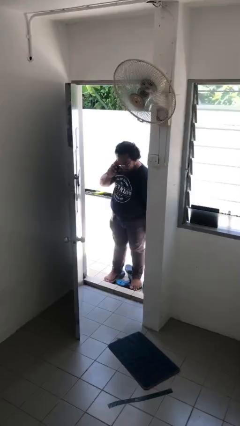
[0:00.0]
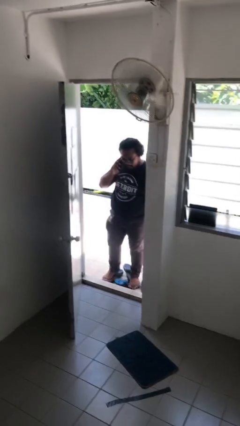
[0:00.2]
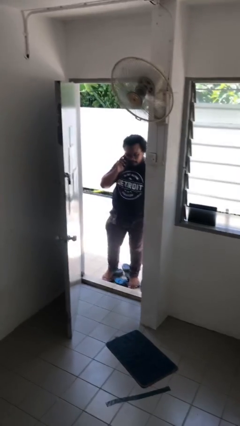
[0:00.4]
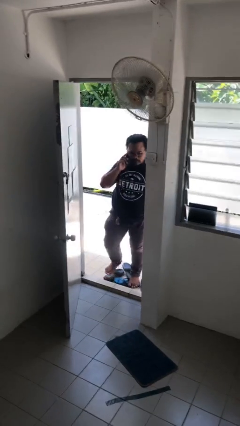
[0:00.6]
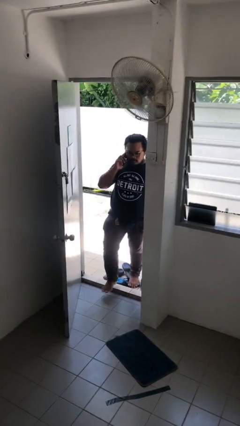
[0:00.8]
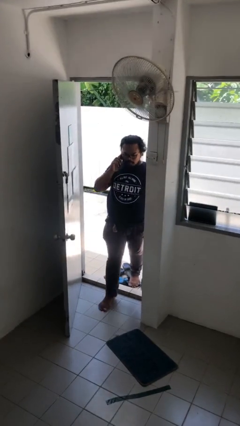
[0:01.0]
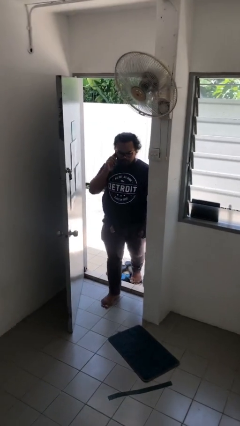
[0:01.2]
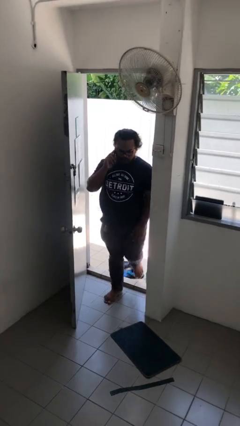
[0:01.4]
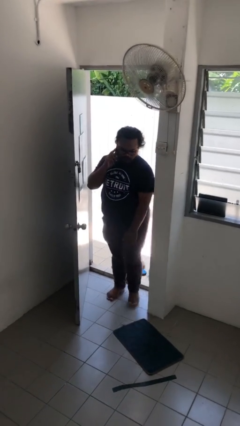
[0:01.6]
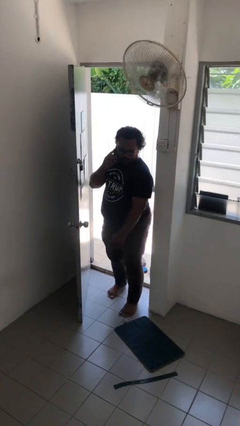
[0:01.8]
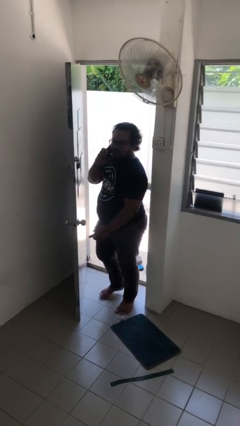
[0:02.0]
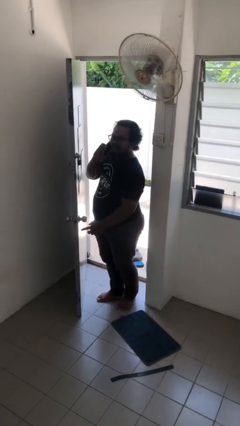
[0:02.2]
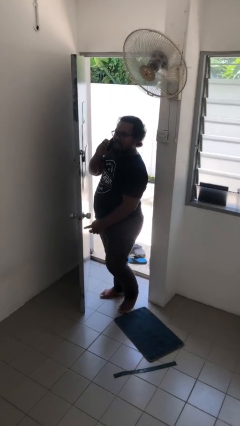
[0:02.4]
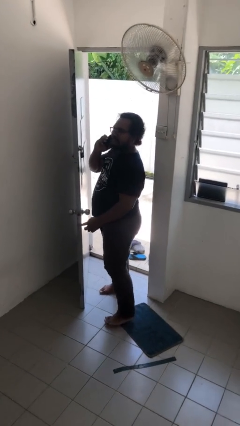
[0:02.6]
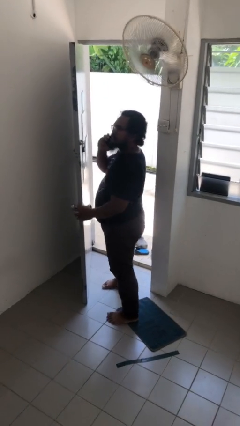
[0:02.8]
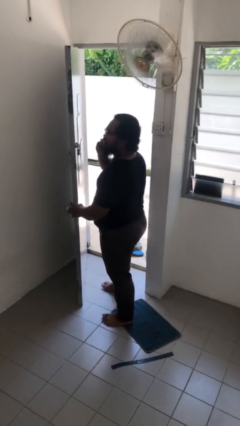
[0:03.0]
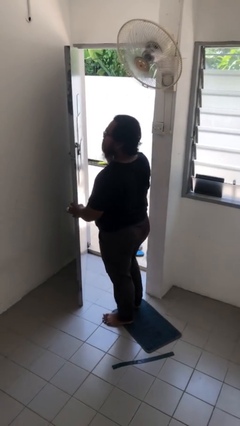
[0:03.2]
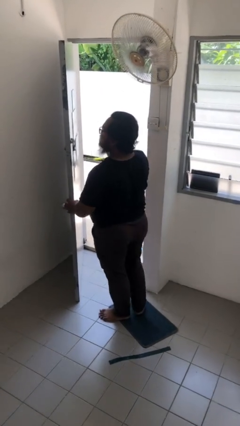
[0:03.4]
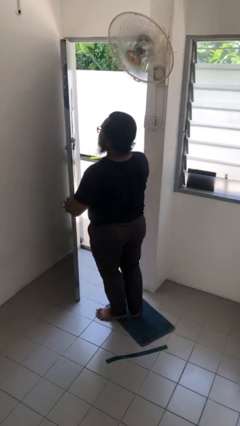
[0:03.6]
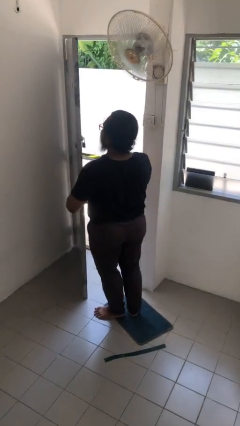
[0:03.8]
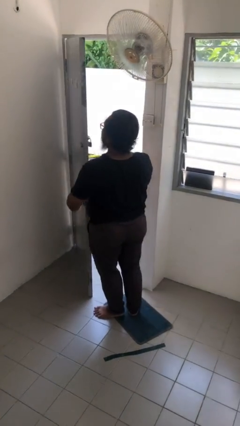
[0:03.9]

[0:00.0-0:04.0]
person enters scene through structure

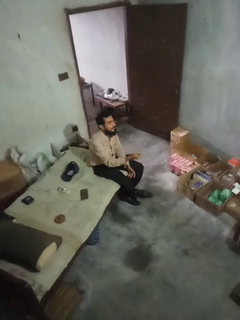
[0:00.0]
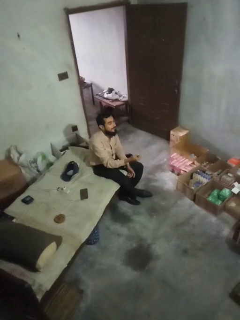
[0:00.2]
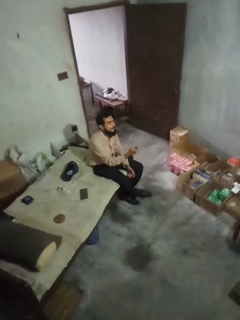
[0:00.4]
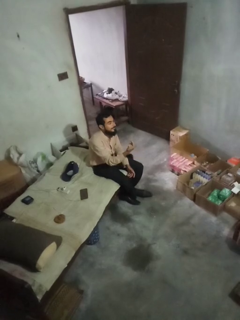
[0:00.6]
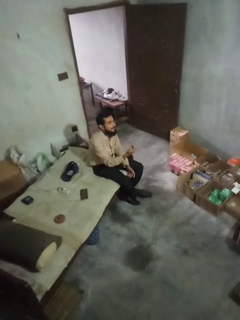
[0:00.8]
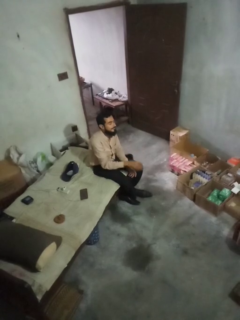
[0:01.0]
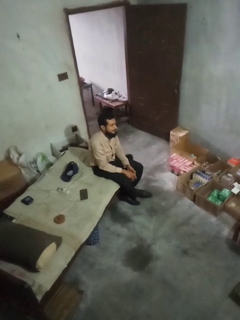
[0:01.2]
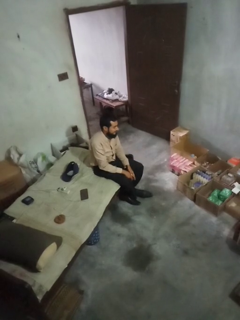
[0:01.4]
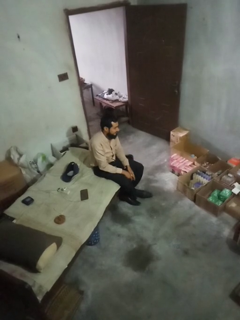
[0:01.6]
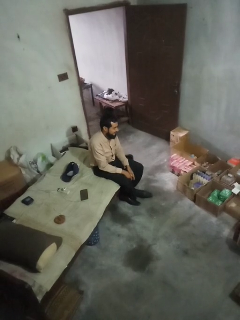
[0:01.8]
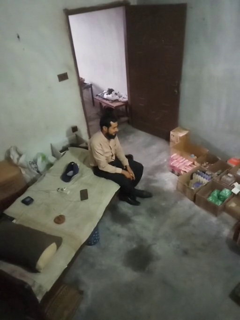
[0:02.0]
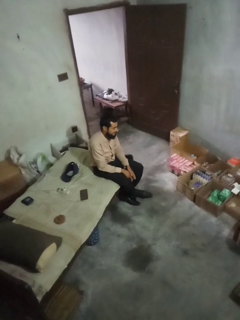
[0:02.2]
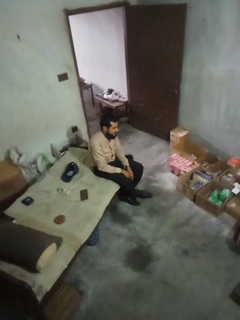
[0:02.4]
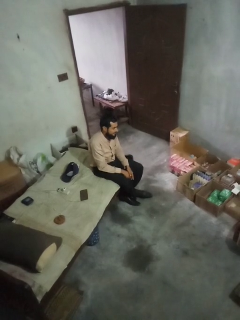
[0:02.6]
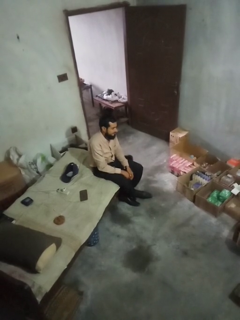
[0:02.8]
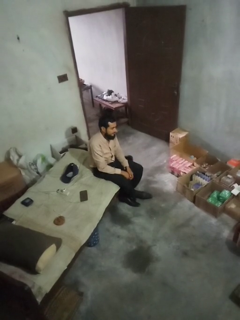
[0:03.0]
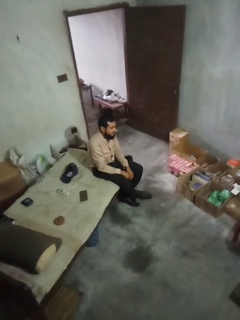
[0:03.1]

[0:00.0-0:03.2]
person gestures lower hand

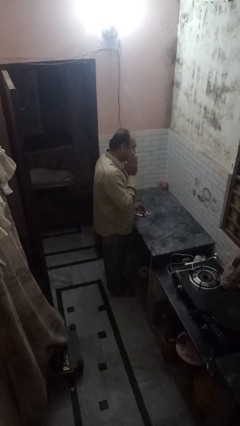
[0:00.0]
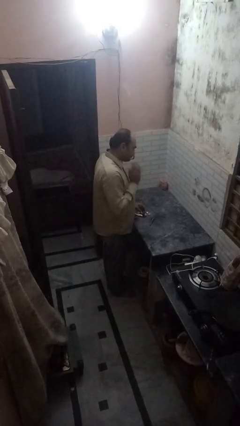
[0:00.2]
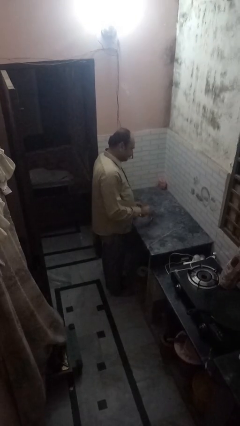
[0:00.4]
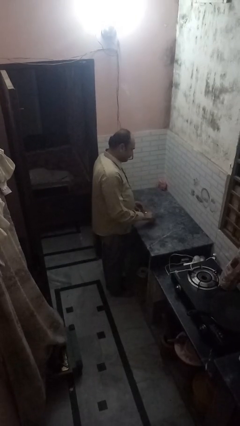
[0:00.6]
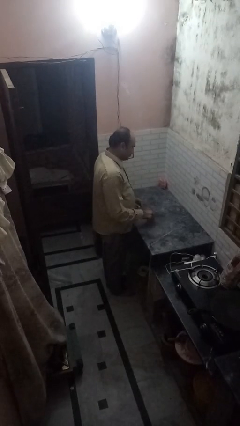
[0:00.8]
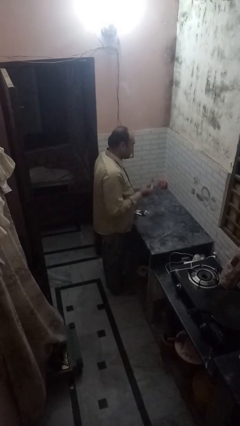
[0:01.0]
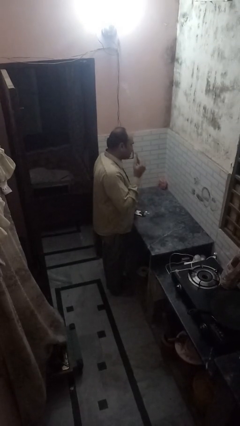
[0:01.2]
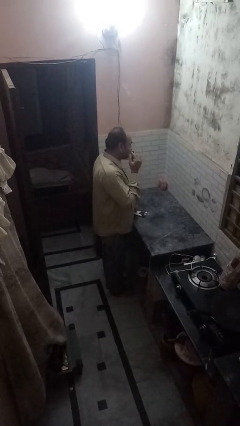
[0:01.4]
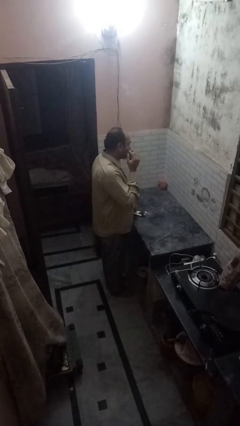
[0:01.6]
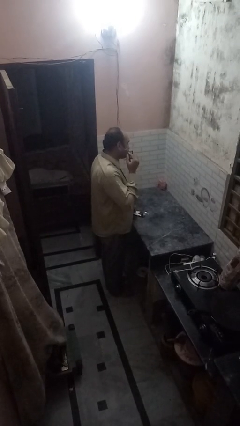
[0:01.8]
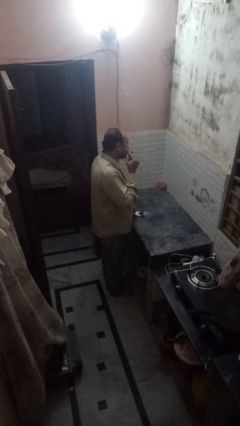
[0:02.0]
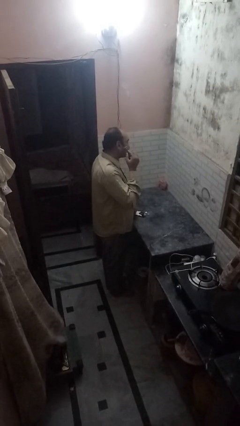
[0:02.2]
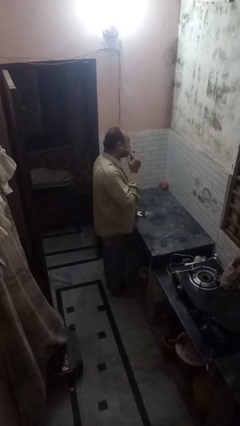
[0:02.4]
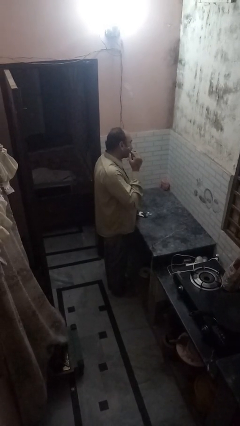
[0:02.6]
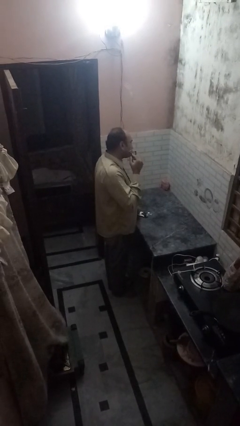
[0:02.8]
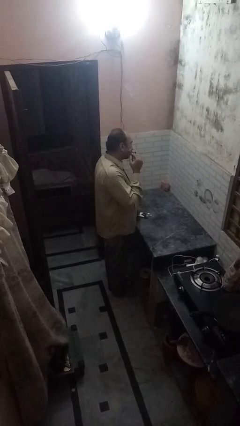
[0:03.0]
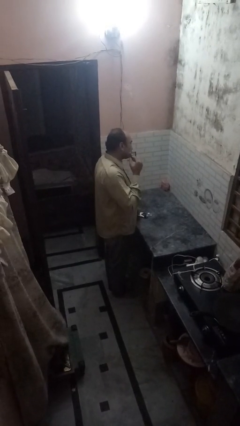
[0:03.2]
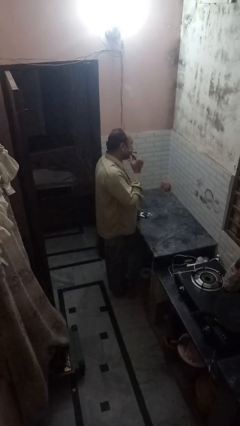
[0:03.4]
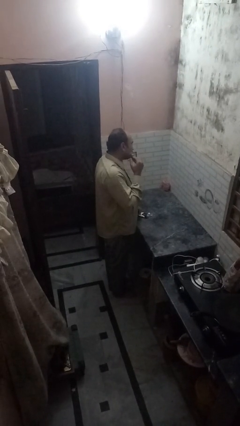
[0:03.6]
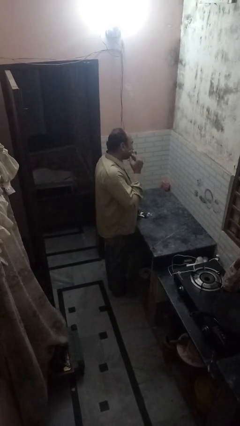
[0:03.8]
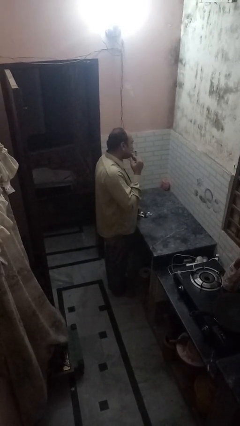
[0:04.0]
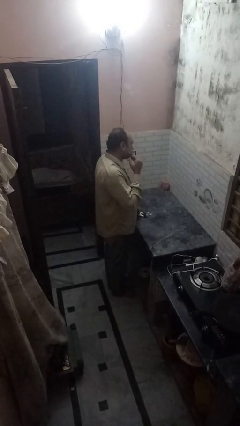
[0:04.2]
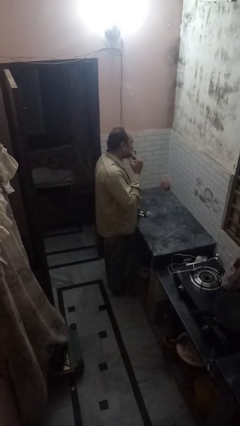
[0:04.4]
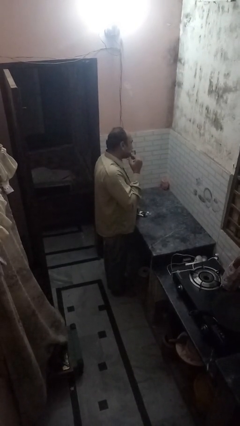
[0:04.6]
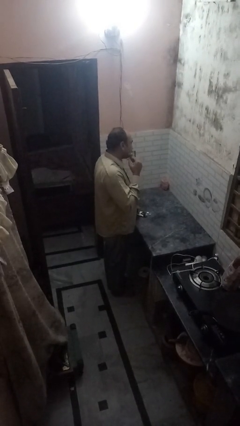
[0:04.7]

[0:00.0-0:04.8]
person shaves face

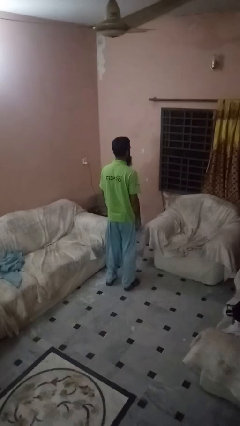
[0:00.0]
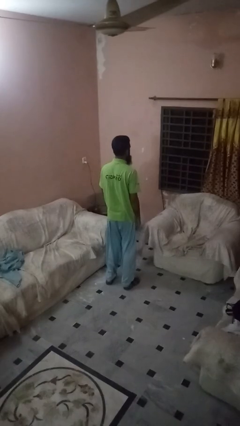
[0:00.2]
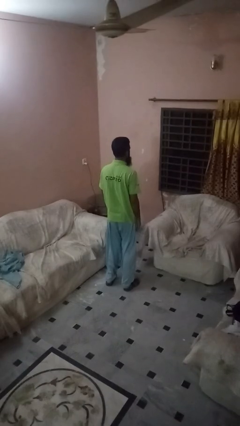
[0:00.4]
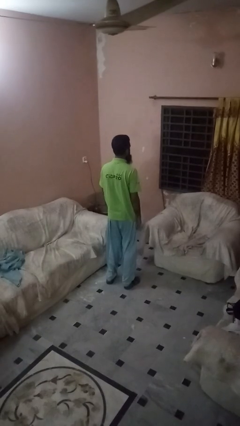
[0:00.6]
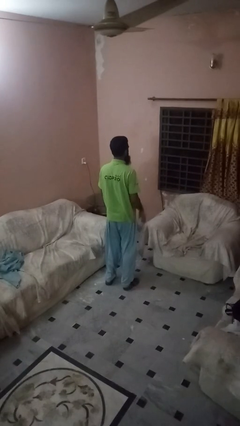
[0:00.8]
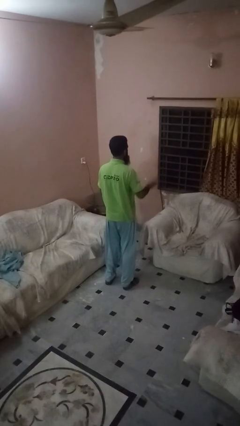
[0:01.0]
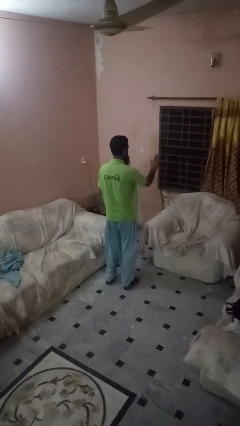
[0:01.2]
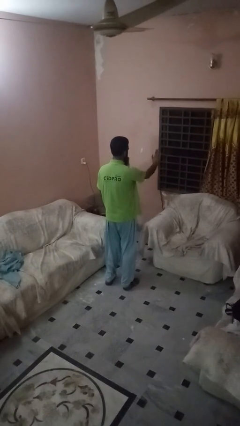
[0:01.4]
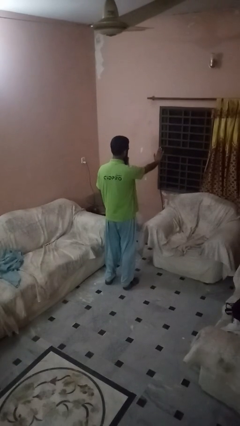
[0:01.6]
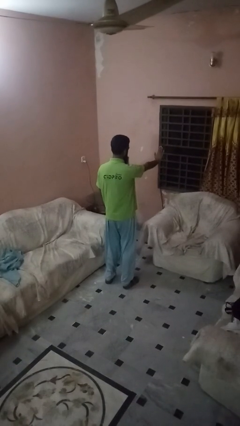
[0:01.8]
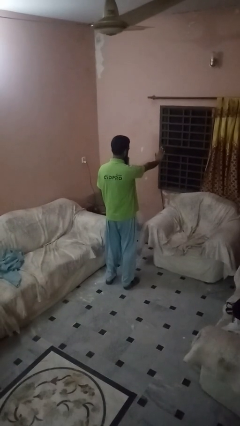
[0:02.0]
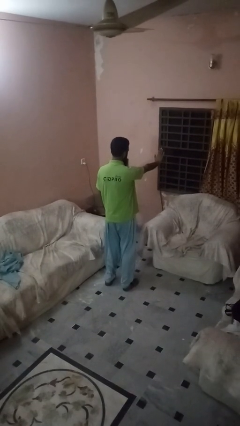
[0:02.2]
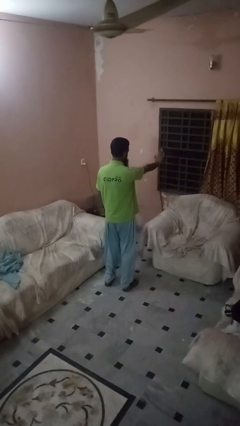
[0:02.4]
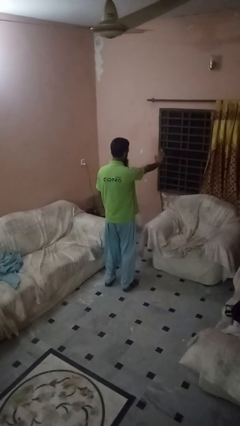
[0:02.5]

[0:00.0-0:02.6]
person gestures stop

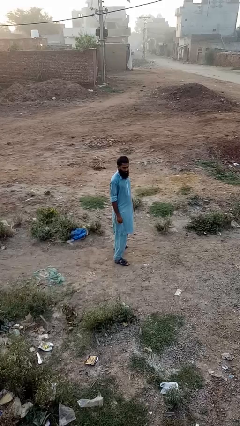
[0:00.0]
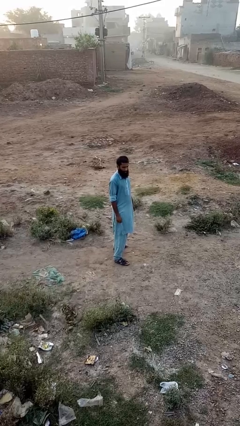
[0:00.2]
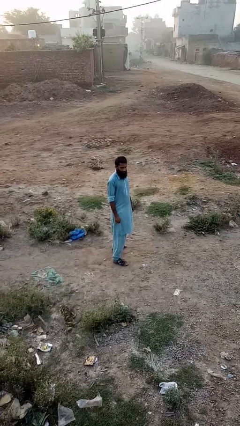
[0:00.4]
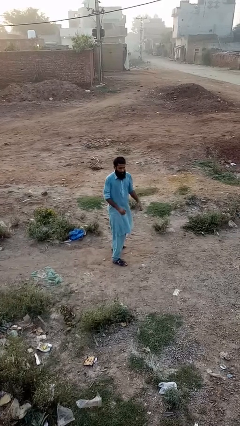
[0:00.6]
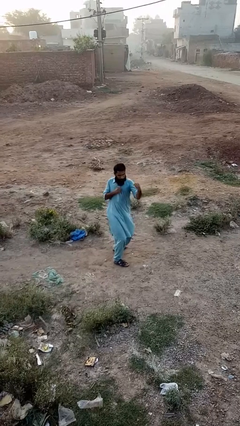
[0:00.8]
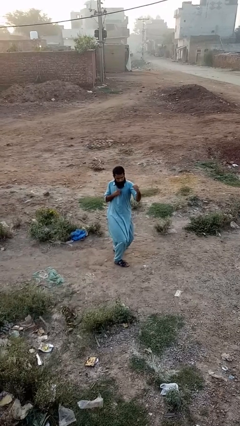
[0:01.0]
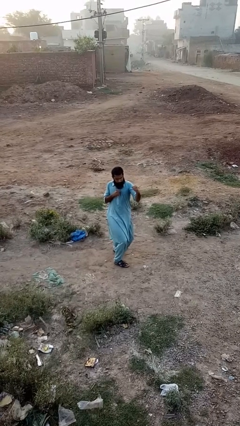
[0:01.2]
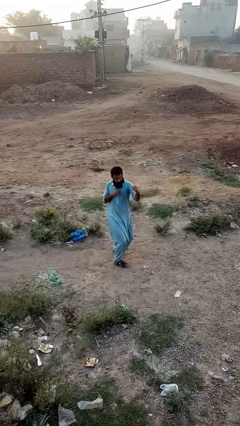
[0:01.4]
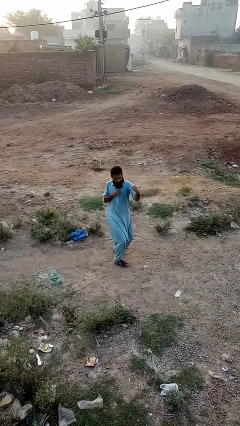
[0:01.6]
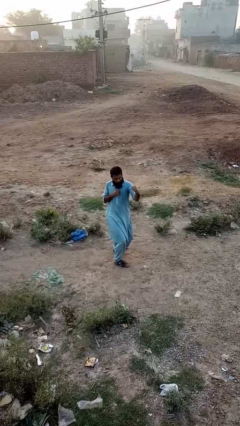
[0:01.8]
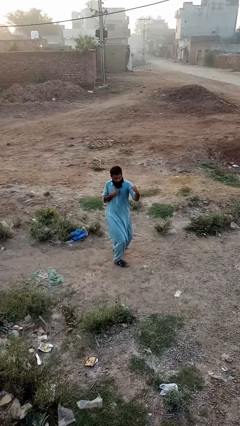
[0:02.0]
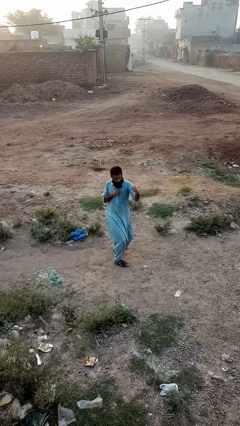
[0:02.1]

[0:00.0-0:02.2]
person karate chop

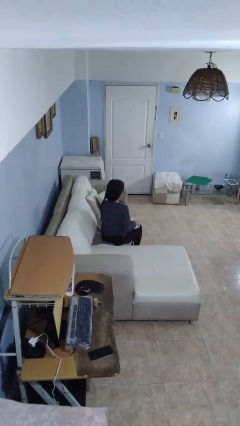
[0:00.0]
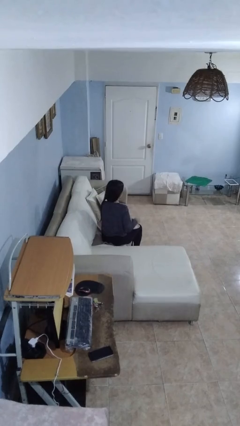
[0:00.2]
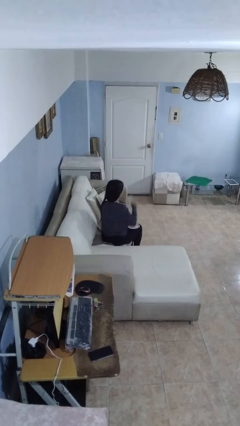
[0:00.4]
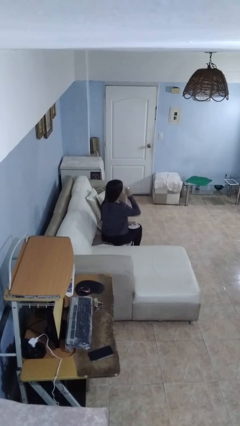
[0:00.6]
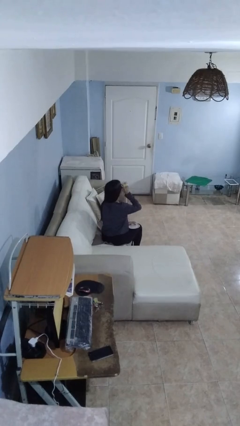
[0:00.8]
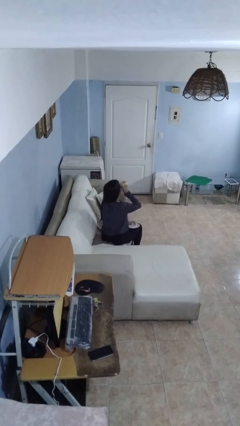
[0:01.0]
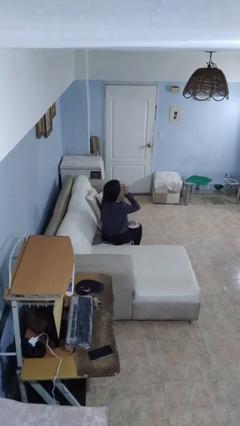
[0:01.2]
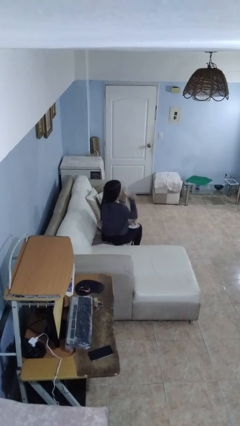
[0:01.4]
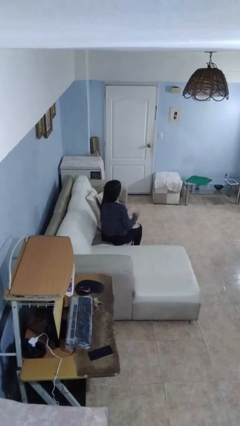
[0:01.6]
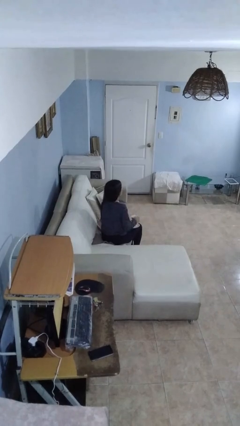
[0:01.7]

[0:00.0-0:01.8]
person drinks from mug
